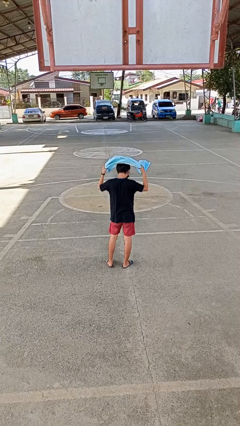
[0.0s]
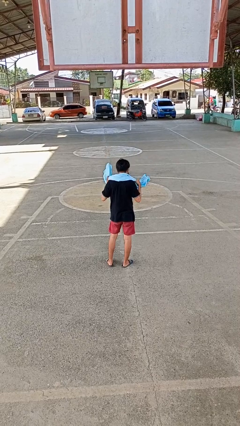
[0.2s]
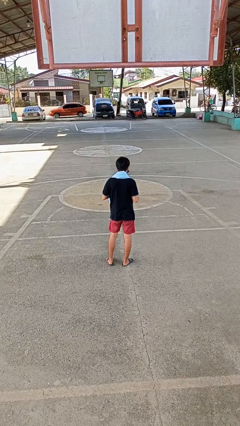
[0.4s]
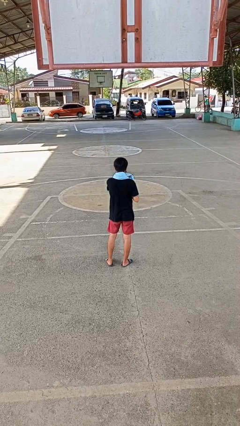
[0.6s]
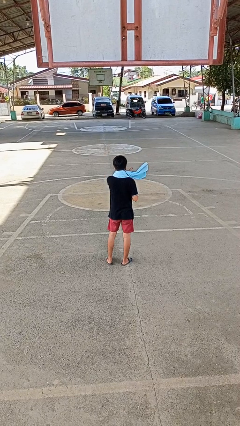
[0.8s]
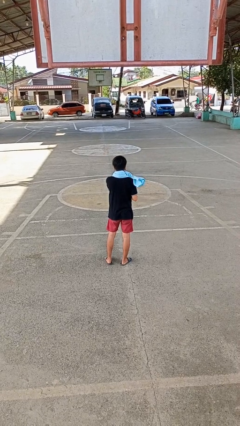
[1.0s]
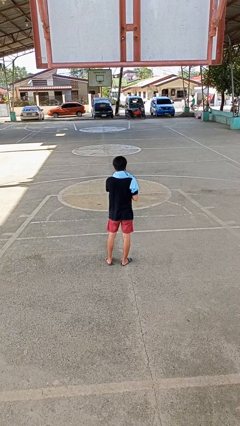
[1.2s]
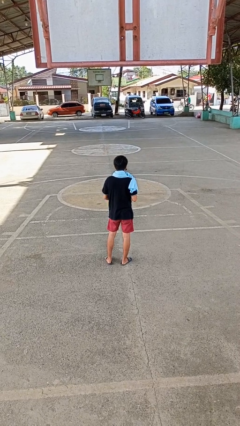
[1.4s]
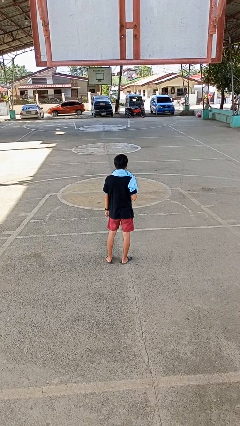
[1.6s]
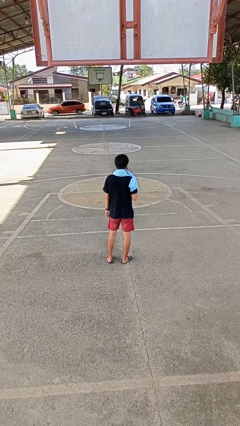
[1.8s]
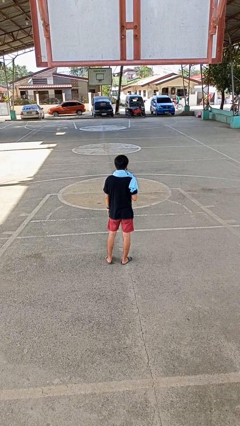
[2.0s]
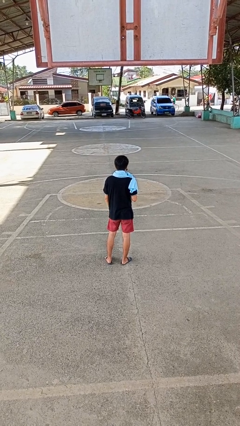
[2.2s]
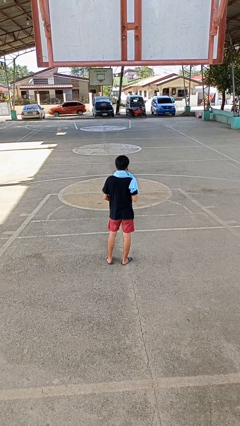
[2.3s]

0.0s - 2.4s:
person puts on scarf

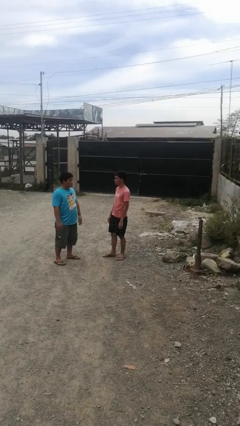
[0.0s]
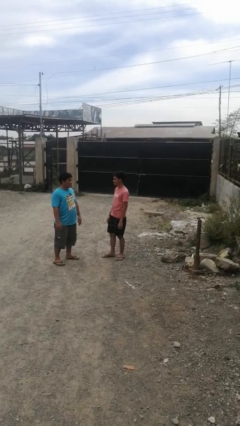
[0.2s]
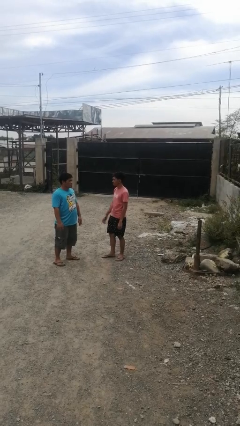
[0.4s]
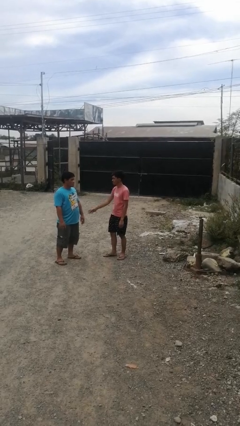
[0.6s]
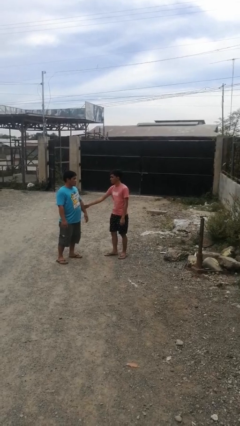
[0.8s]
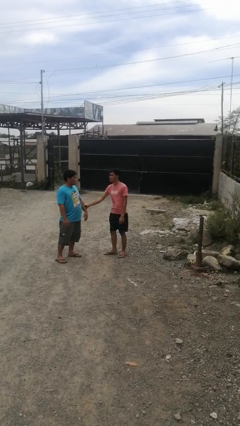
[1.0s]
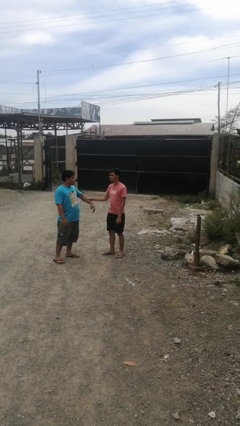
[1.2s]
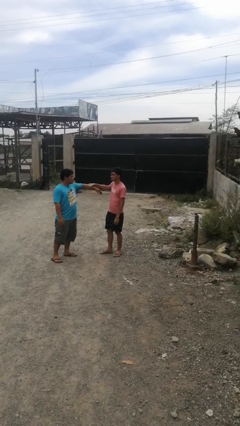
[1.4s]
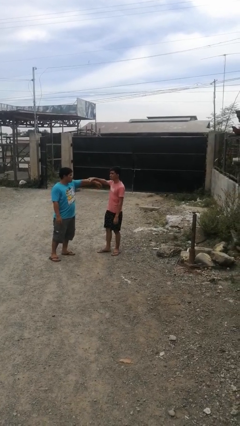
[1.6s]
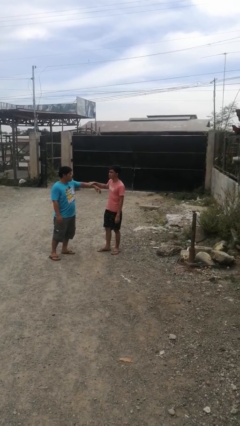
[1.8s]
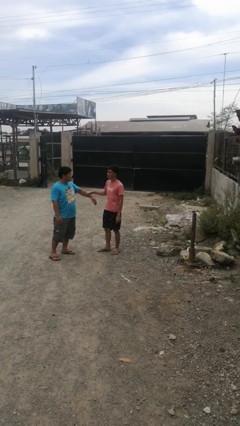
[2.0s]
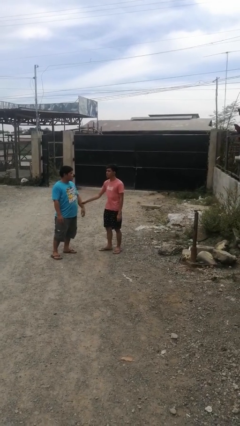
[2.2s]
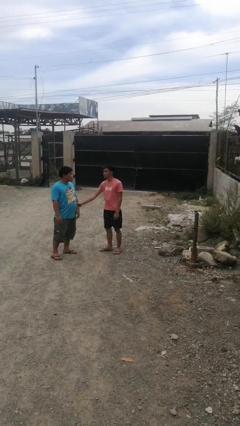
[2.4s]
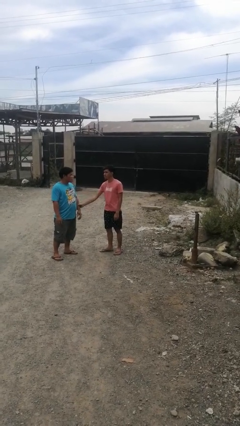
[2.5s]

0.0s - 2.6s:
person grabs person by forearm

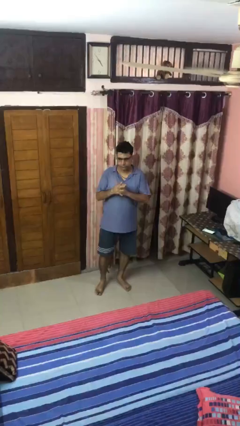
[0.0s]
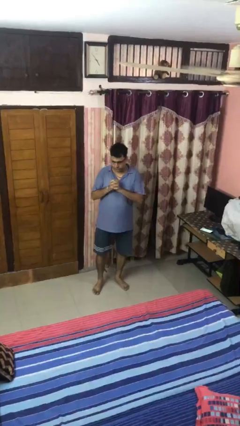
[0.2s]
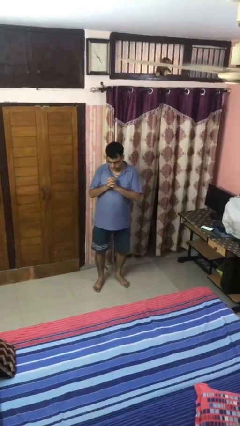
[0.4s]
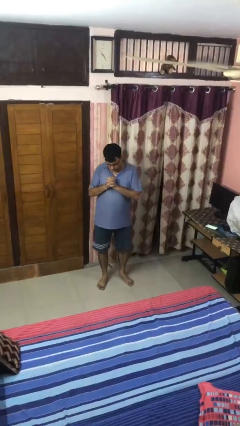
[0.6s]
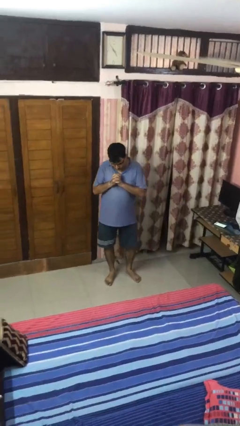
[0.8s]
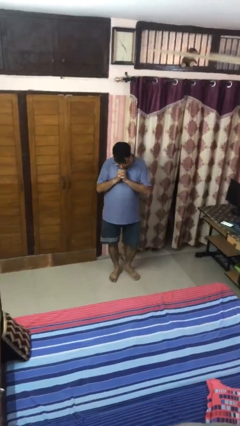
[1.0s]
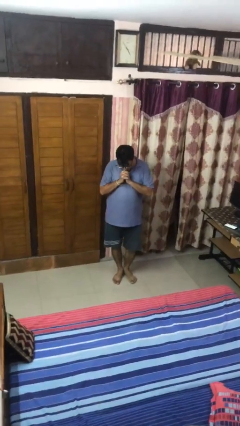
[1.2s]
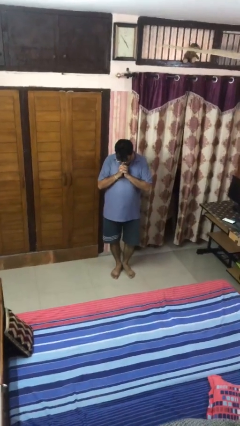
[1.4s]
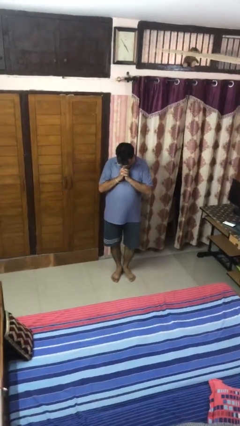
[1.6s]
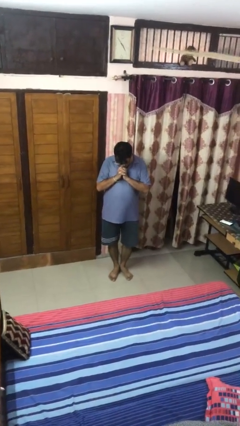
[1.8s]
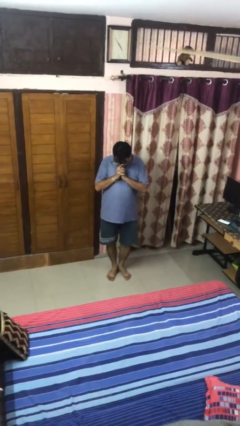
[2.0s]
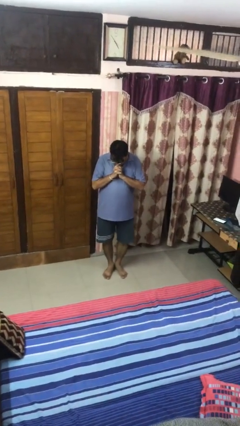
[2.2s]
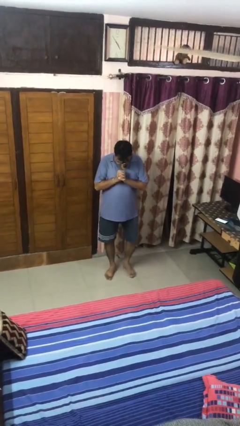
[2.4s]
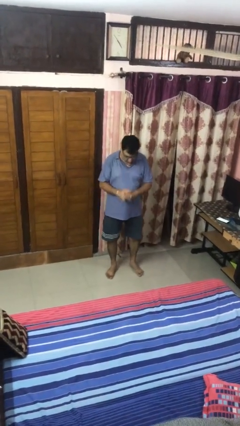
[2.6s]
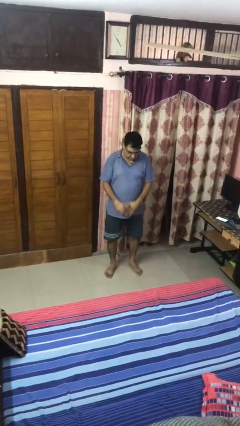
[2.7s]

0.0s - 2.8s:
person prays

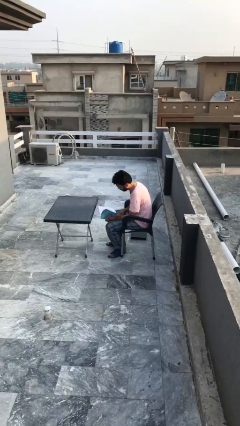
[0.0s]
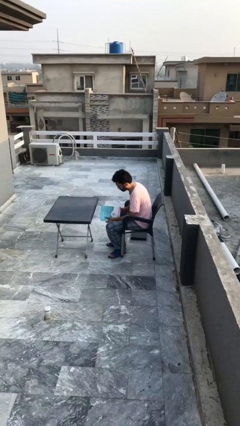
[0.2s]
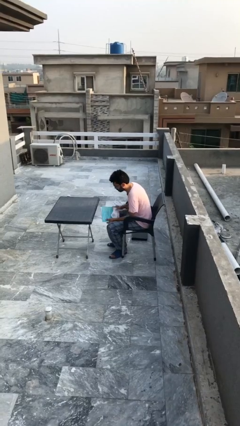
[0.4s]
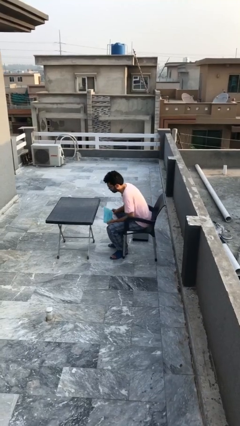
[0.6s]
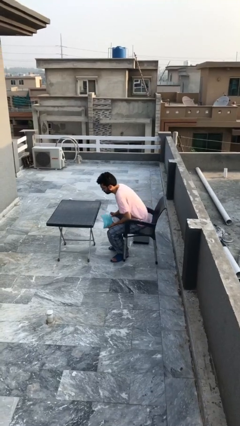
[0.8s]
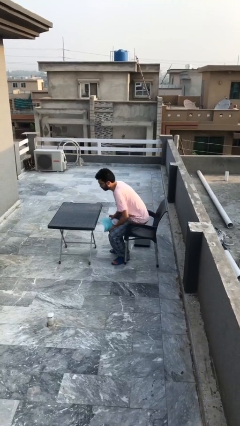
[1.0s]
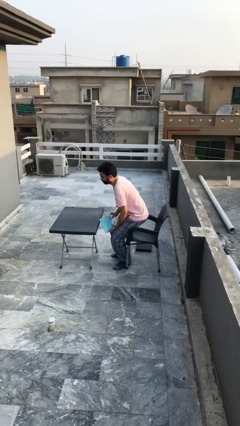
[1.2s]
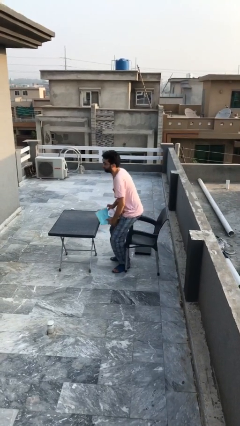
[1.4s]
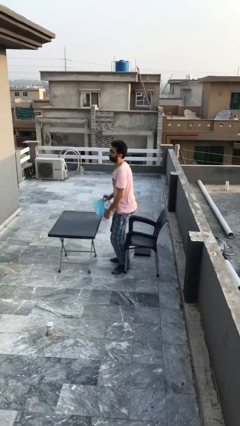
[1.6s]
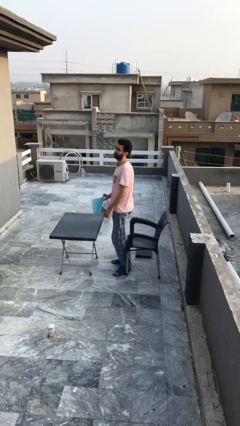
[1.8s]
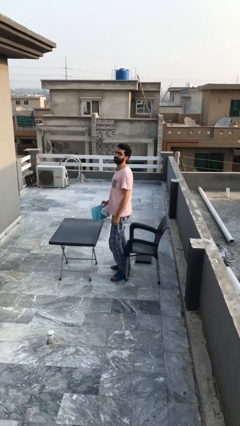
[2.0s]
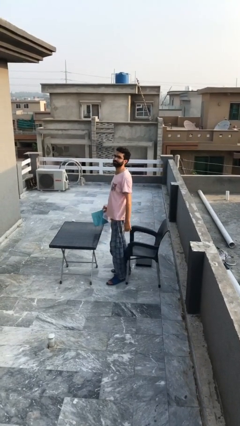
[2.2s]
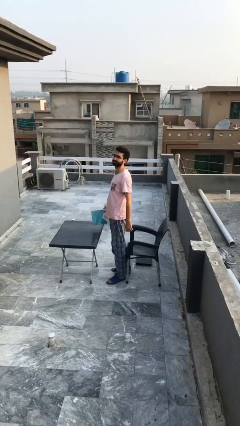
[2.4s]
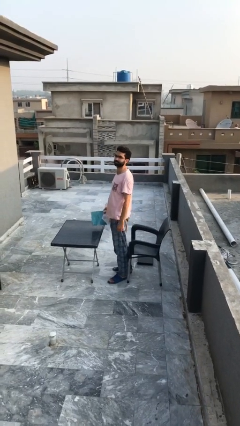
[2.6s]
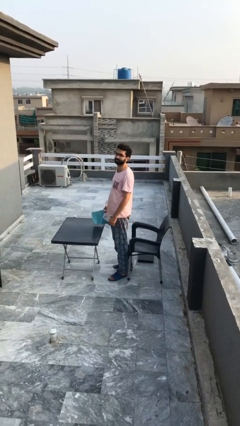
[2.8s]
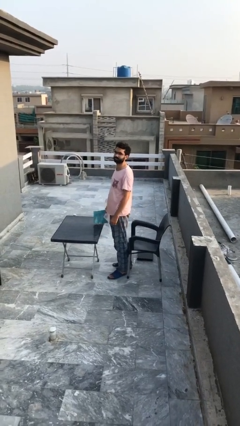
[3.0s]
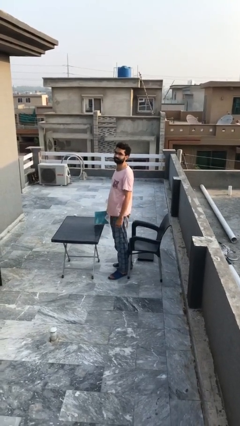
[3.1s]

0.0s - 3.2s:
person stands up

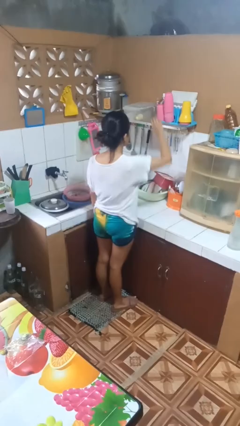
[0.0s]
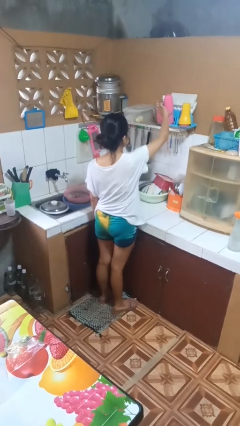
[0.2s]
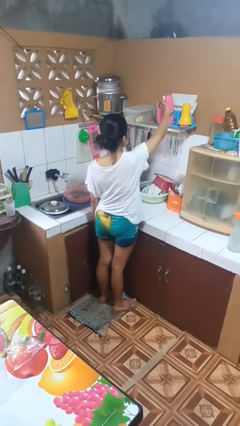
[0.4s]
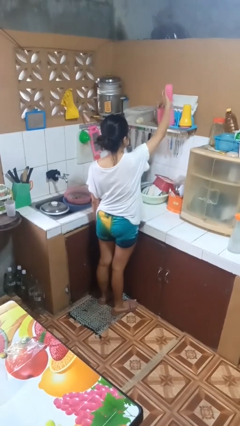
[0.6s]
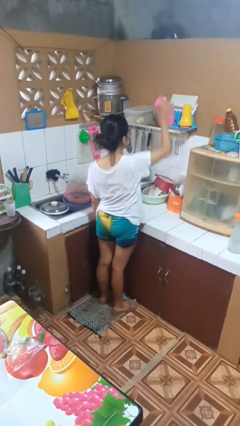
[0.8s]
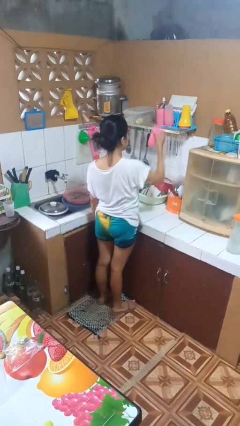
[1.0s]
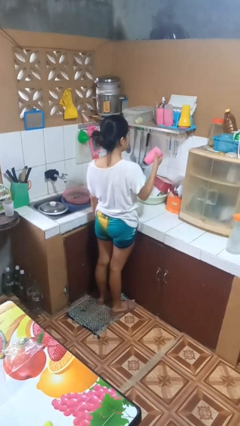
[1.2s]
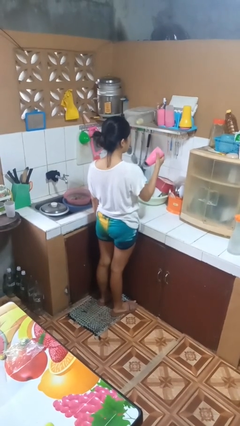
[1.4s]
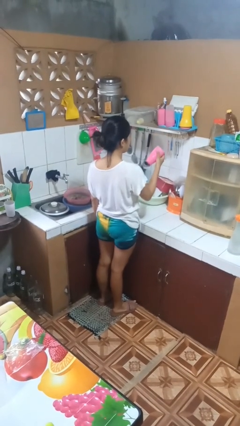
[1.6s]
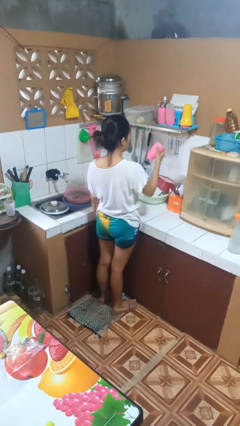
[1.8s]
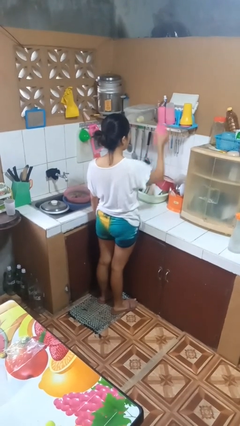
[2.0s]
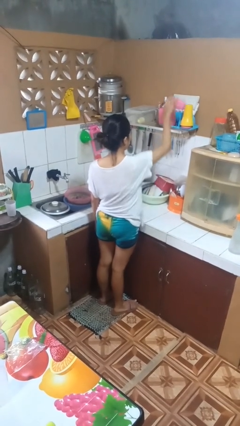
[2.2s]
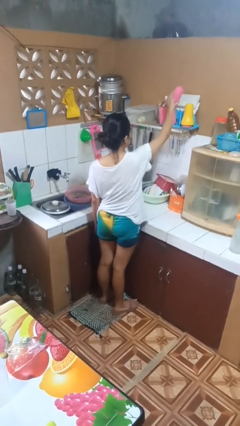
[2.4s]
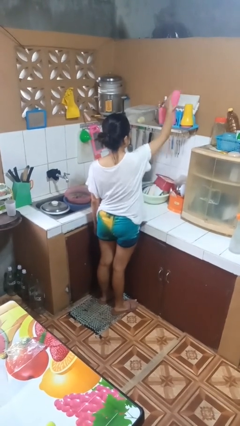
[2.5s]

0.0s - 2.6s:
person picks up object from shelf

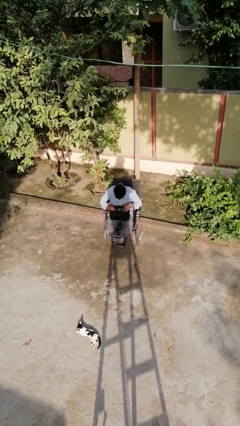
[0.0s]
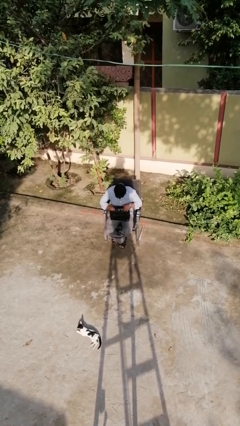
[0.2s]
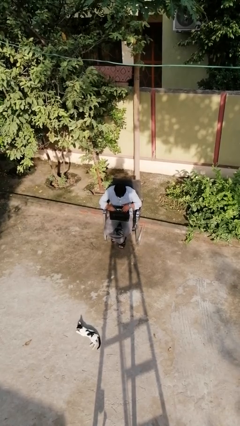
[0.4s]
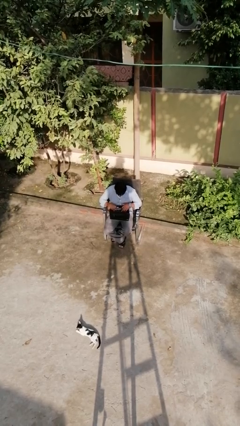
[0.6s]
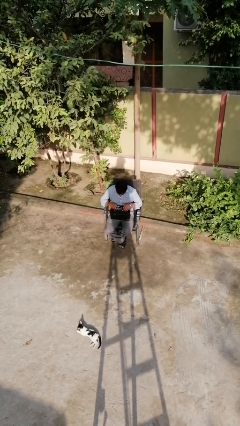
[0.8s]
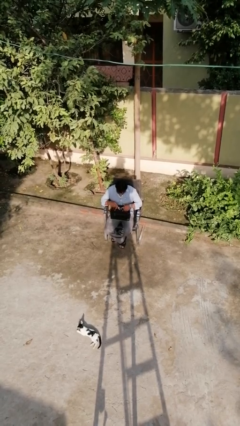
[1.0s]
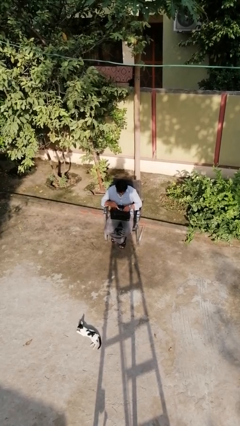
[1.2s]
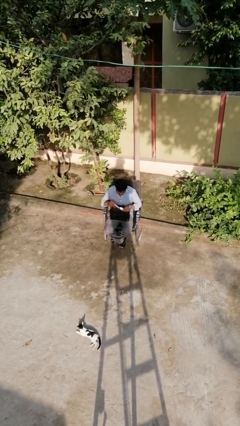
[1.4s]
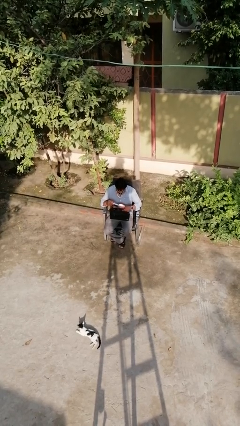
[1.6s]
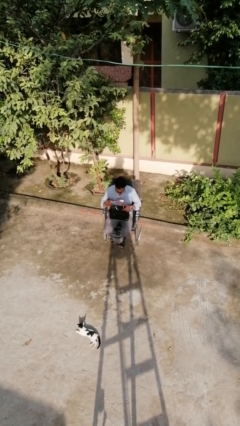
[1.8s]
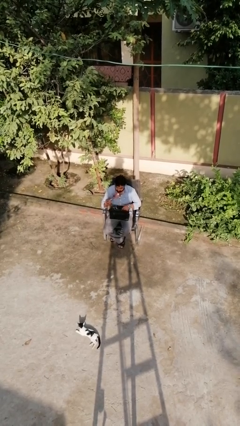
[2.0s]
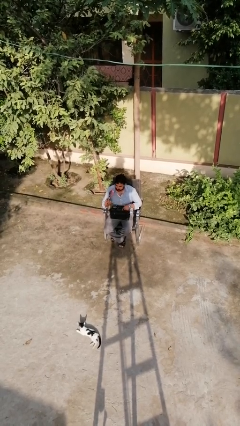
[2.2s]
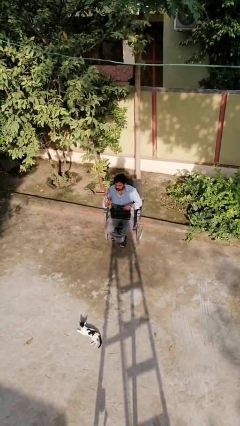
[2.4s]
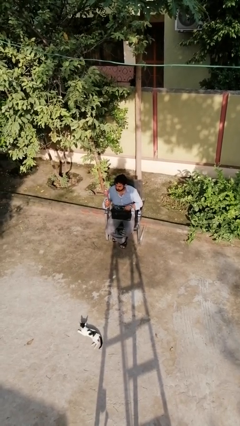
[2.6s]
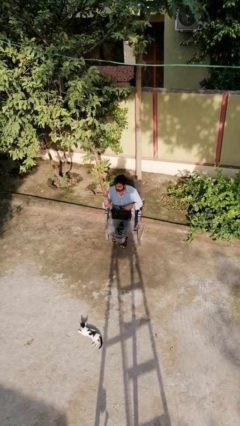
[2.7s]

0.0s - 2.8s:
person takes object from backpack

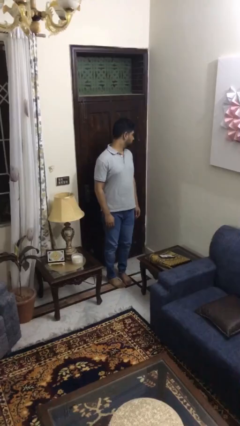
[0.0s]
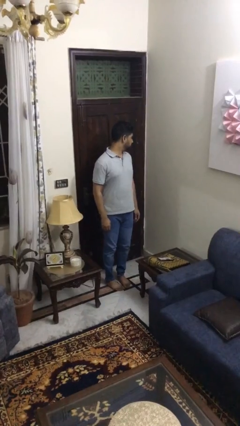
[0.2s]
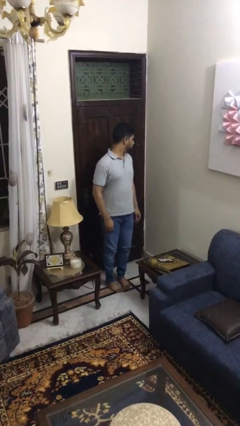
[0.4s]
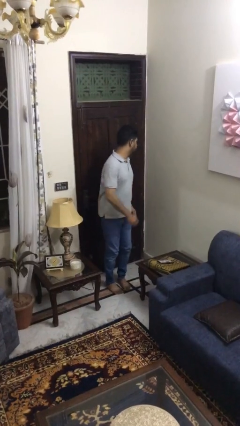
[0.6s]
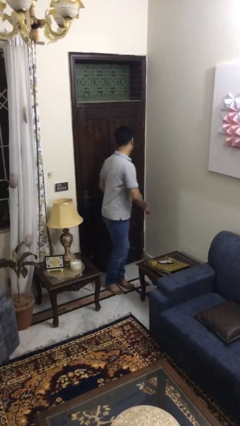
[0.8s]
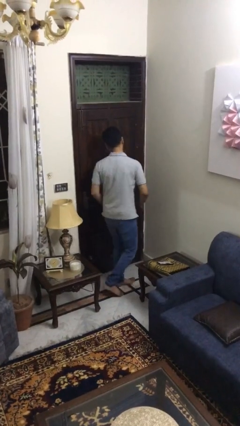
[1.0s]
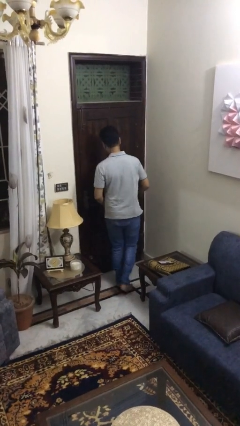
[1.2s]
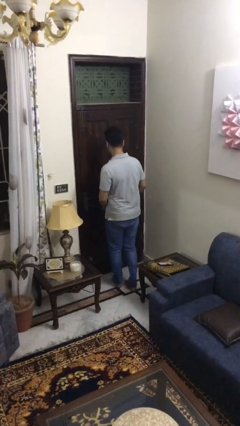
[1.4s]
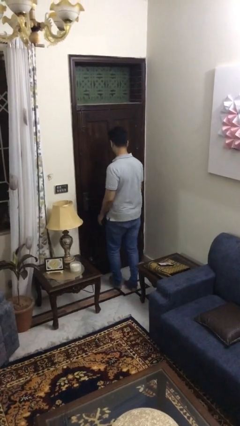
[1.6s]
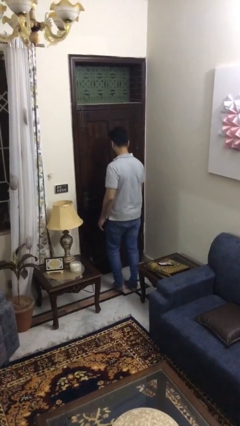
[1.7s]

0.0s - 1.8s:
person twirls
